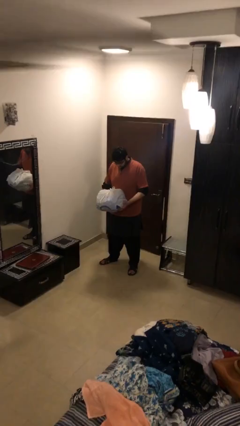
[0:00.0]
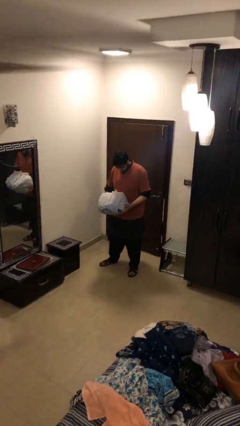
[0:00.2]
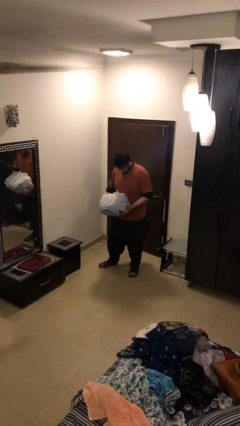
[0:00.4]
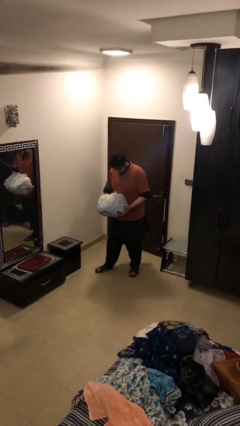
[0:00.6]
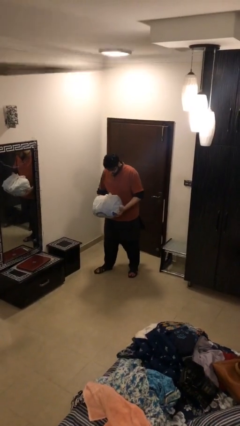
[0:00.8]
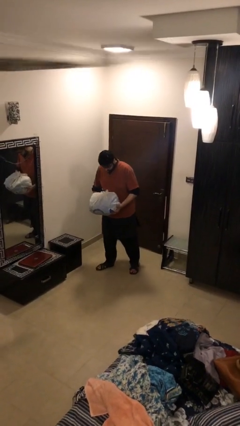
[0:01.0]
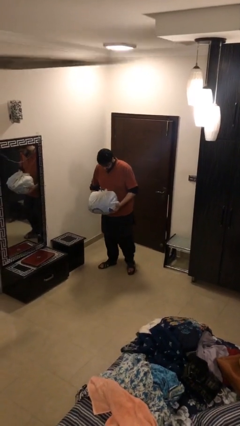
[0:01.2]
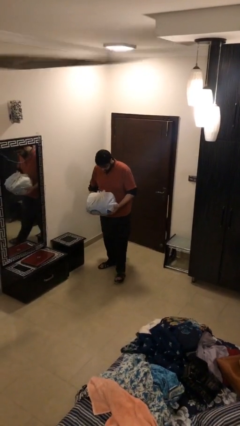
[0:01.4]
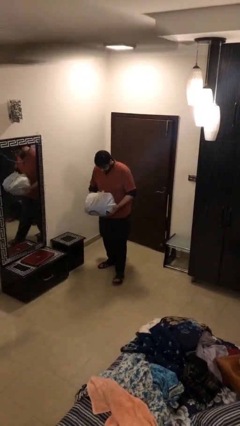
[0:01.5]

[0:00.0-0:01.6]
person carries heavy object

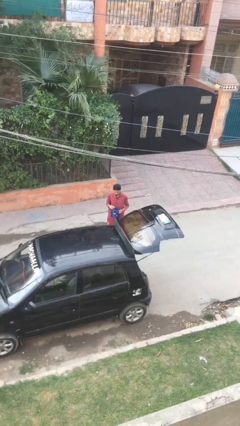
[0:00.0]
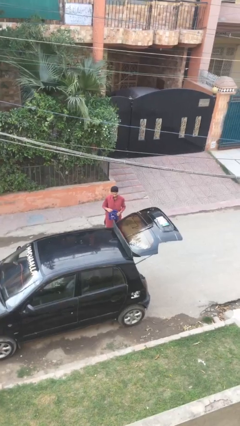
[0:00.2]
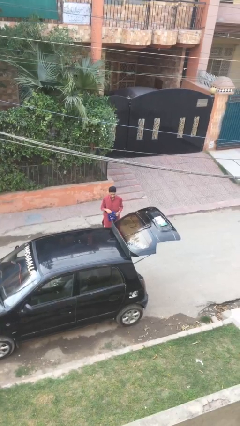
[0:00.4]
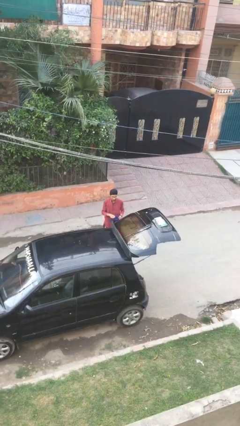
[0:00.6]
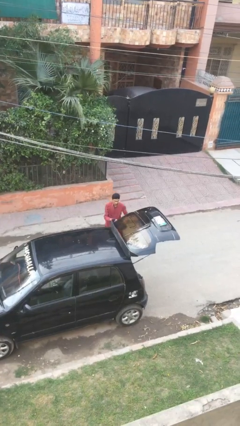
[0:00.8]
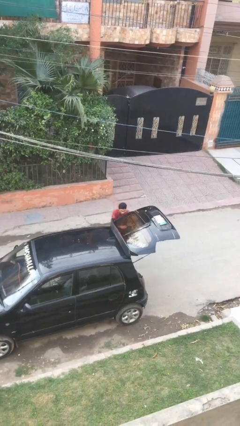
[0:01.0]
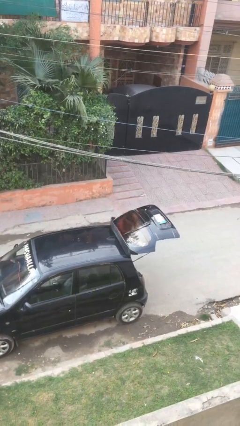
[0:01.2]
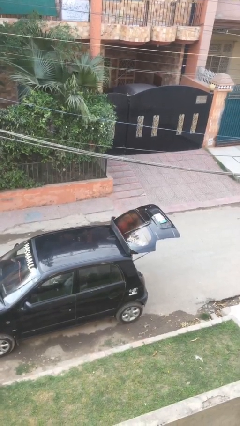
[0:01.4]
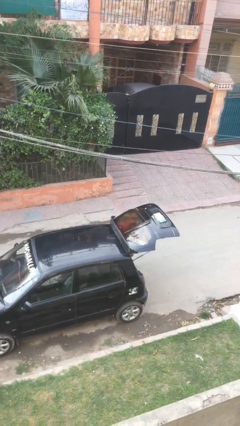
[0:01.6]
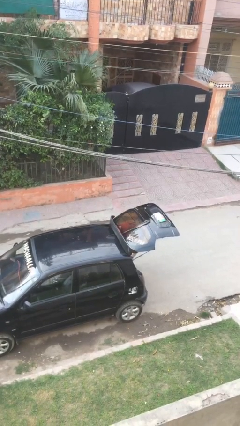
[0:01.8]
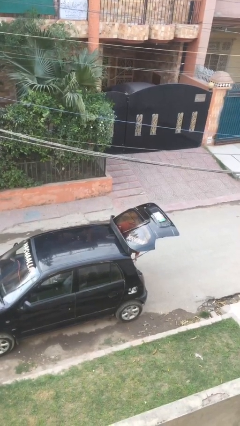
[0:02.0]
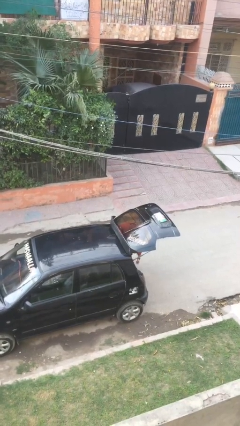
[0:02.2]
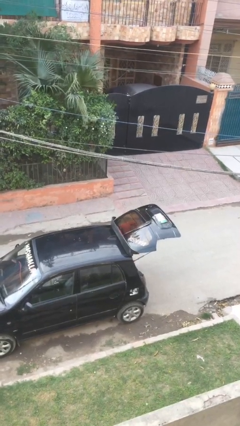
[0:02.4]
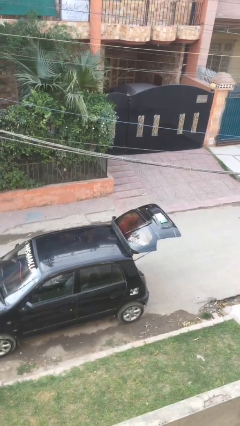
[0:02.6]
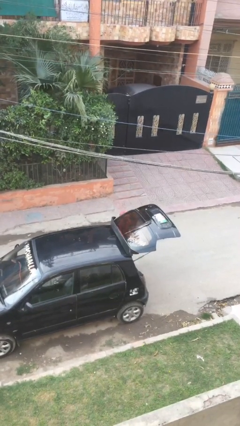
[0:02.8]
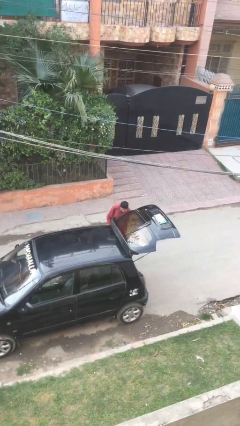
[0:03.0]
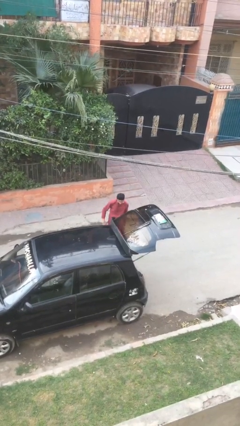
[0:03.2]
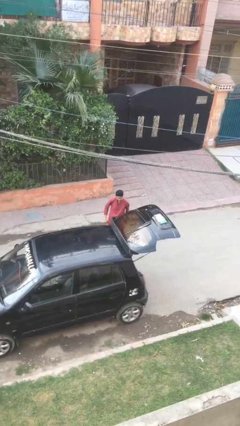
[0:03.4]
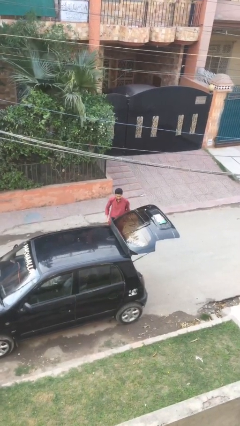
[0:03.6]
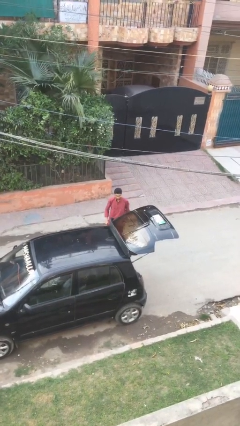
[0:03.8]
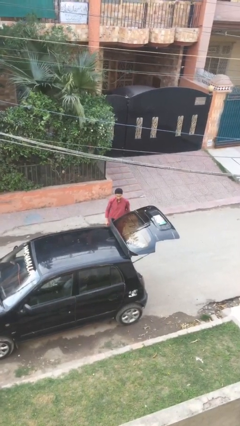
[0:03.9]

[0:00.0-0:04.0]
person loads car

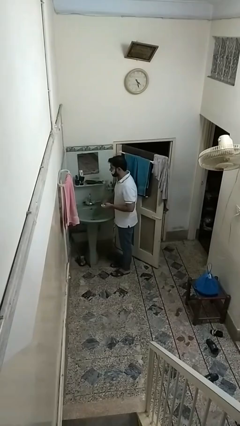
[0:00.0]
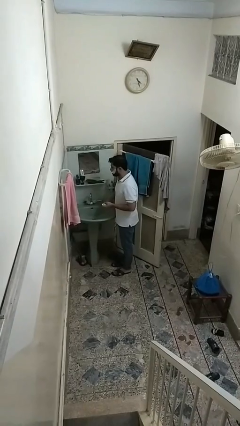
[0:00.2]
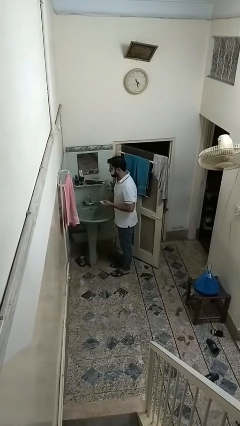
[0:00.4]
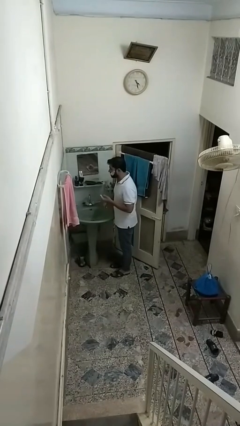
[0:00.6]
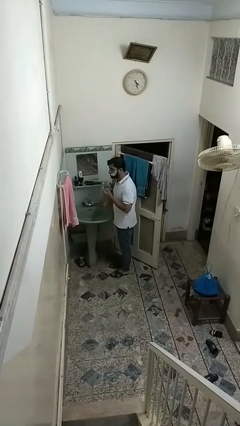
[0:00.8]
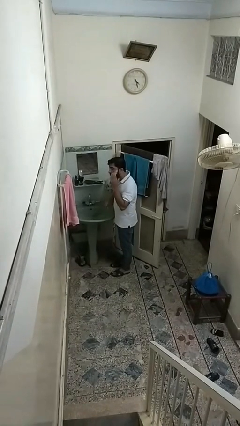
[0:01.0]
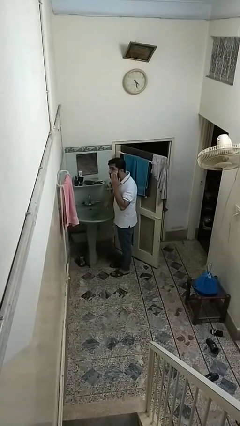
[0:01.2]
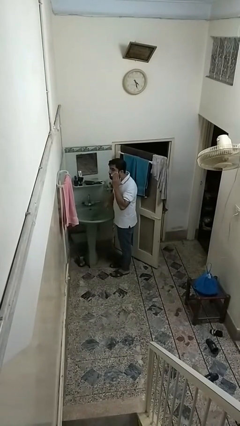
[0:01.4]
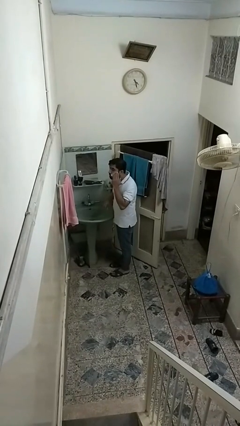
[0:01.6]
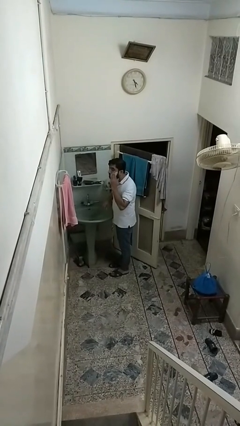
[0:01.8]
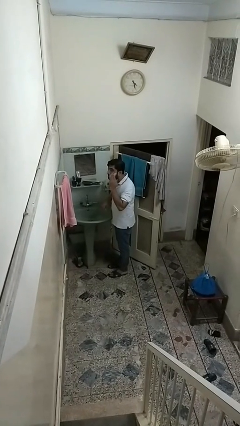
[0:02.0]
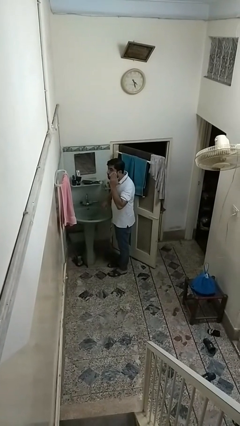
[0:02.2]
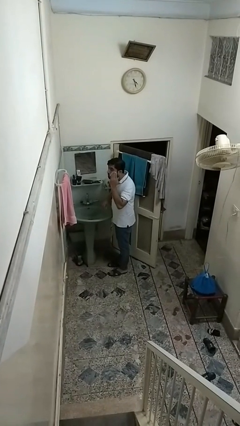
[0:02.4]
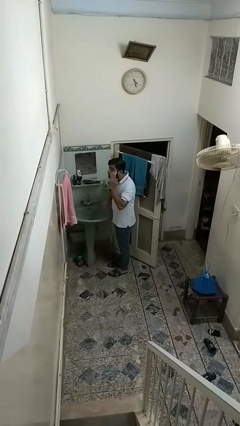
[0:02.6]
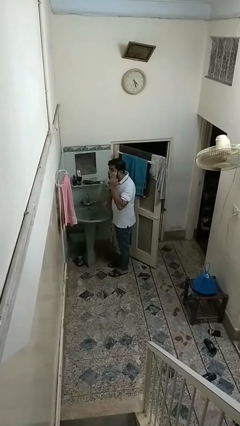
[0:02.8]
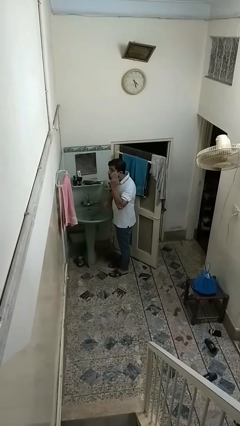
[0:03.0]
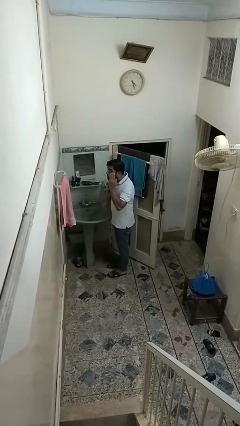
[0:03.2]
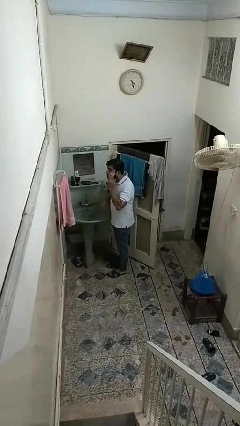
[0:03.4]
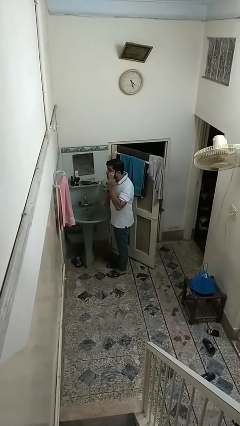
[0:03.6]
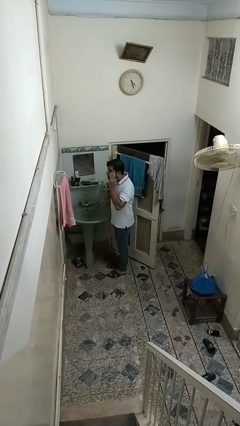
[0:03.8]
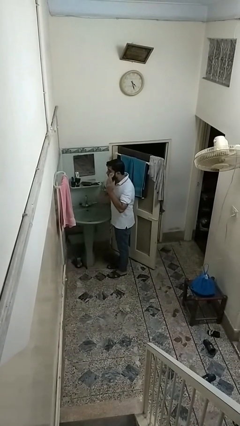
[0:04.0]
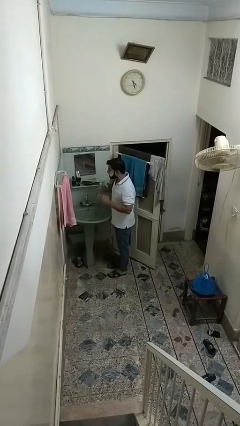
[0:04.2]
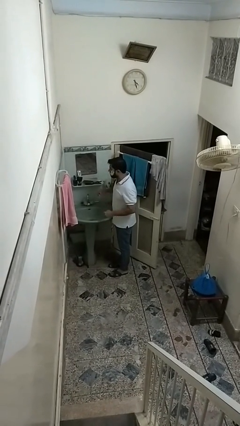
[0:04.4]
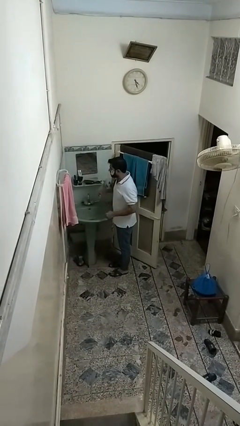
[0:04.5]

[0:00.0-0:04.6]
person applies shaving cream

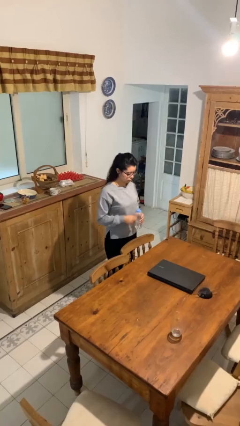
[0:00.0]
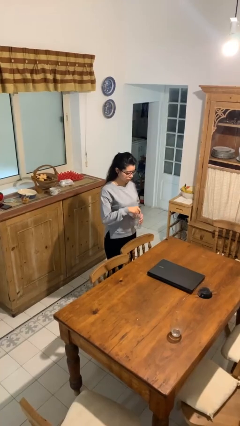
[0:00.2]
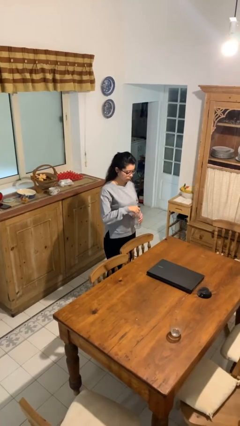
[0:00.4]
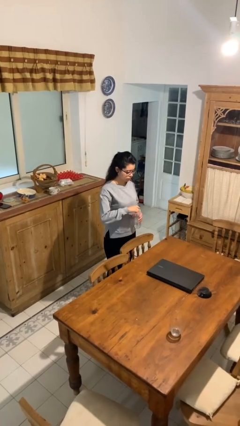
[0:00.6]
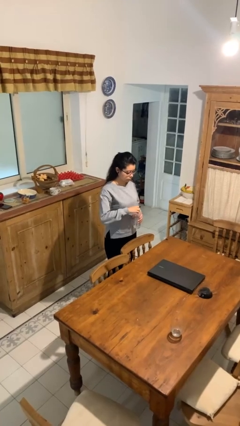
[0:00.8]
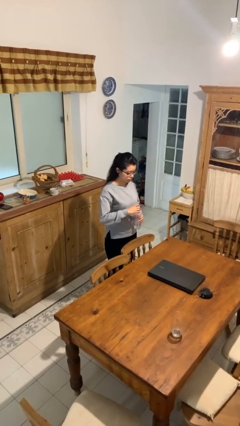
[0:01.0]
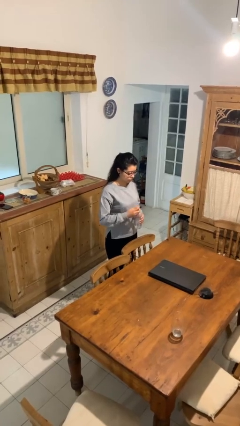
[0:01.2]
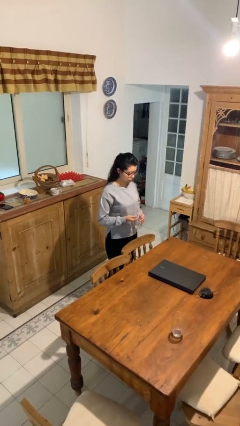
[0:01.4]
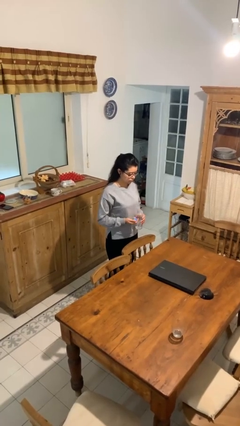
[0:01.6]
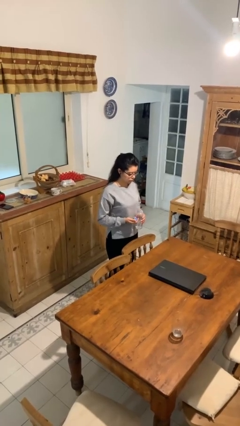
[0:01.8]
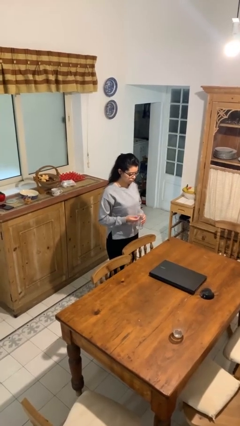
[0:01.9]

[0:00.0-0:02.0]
person unscrews lid from bottle

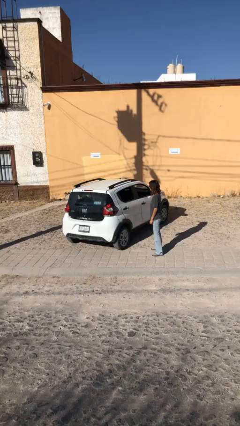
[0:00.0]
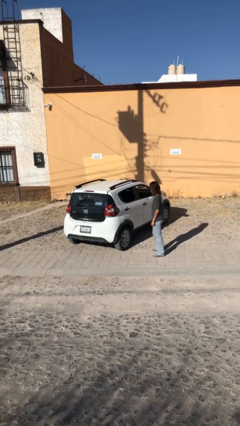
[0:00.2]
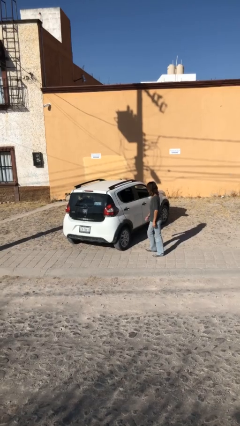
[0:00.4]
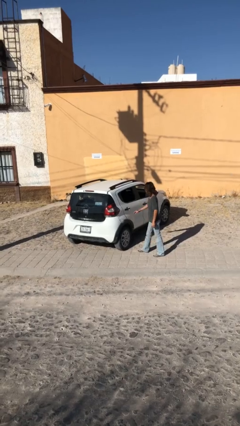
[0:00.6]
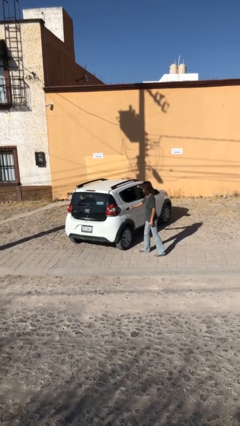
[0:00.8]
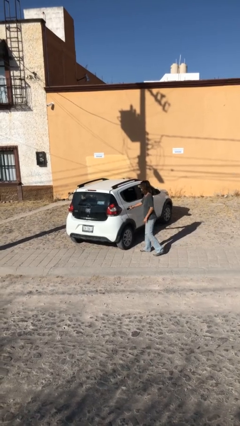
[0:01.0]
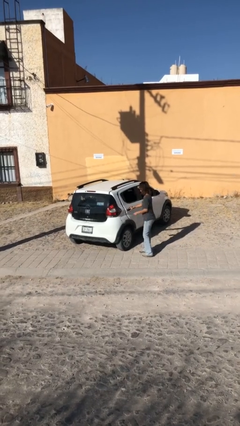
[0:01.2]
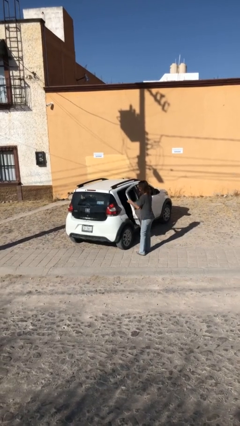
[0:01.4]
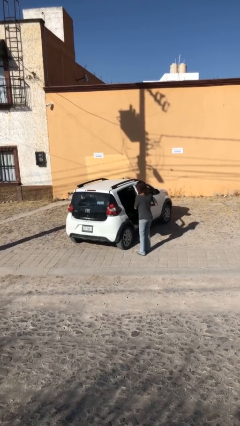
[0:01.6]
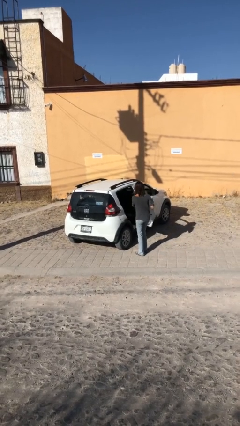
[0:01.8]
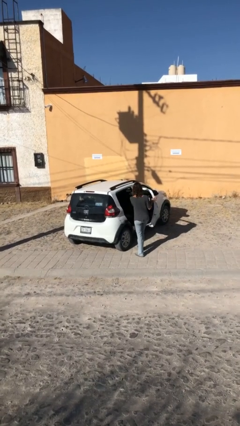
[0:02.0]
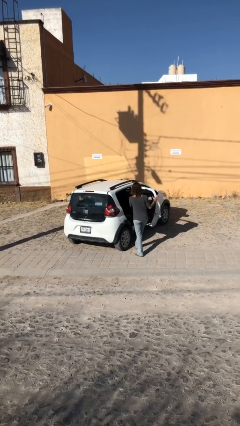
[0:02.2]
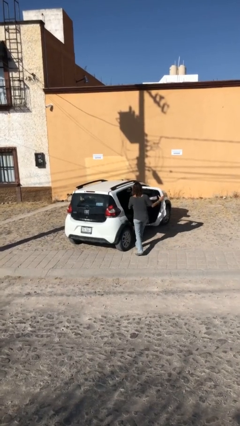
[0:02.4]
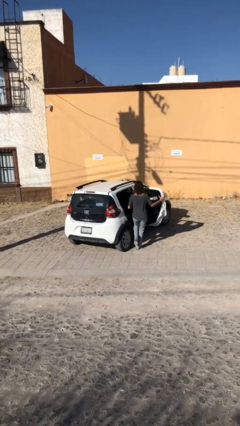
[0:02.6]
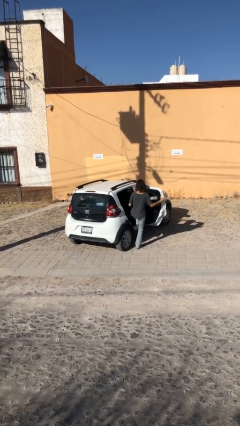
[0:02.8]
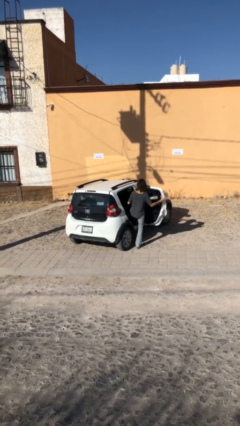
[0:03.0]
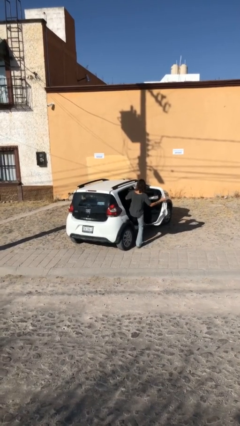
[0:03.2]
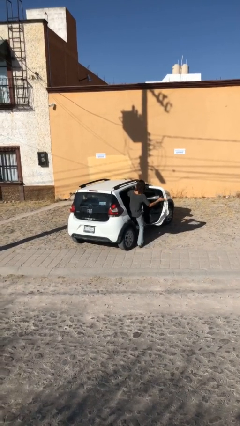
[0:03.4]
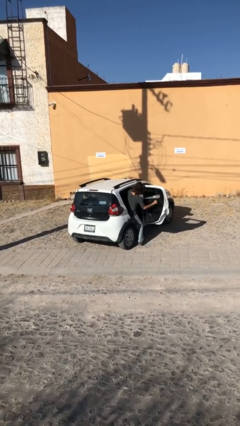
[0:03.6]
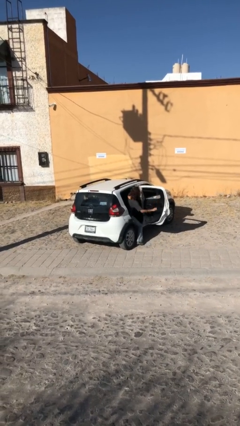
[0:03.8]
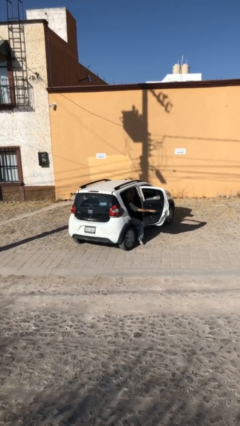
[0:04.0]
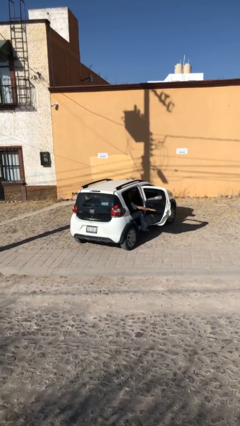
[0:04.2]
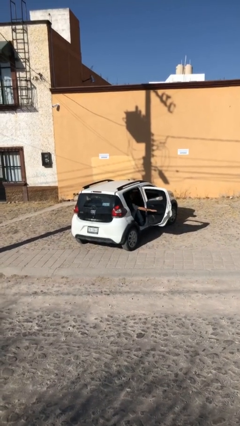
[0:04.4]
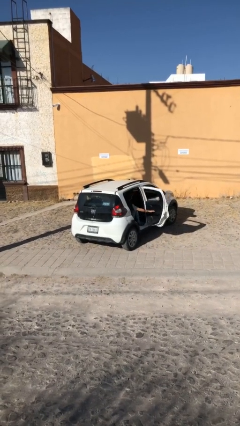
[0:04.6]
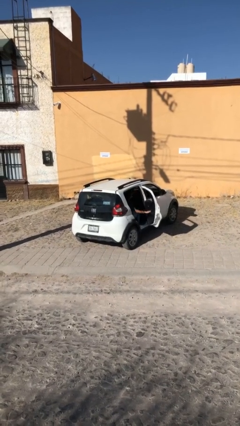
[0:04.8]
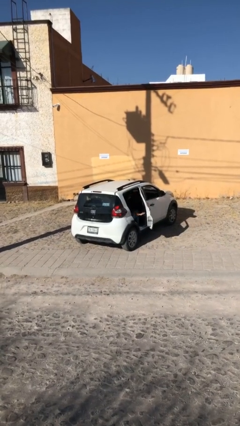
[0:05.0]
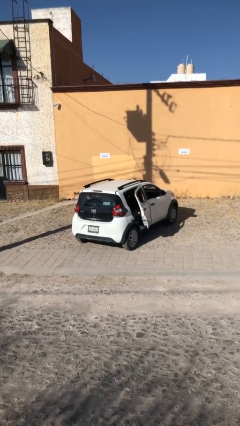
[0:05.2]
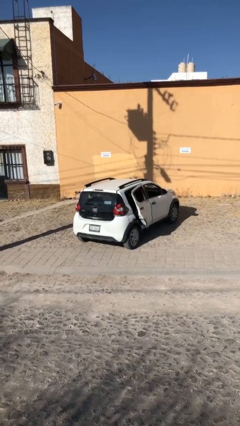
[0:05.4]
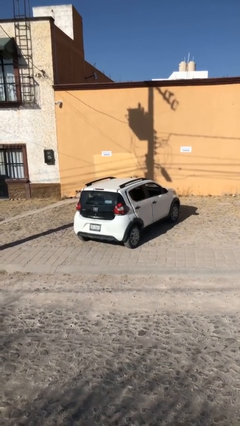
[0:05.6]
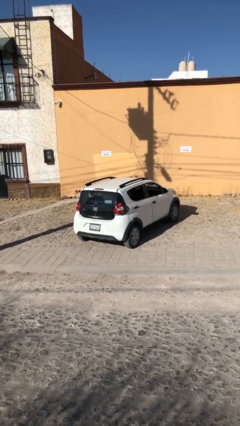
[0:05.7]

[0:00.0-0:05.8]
car picks up person
